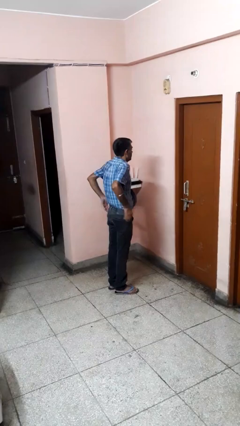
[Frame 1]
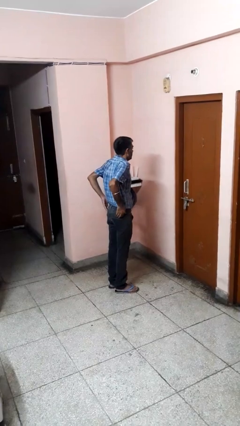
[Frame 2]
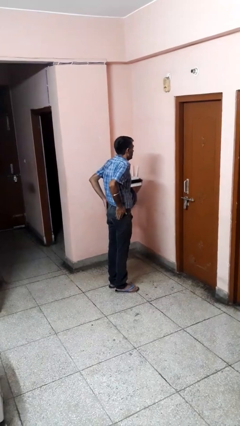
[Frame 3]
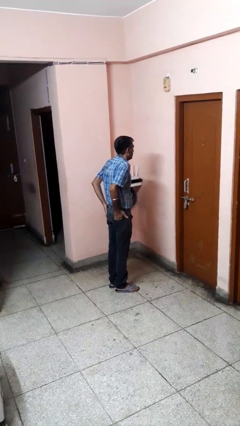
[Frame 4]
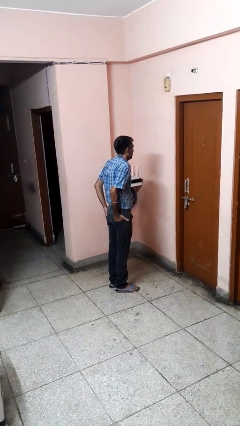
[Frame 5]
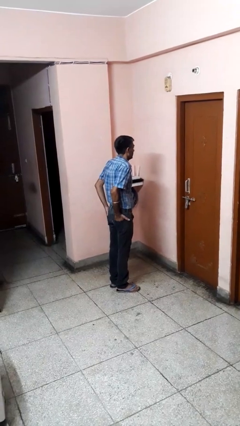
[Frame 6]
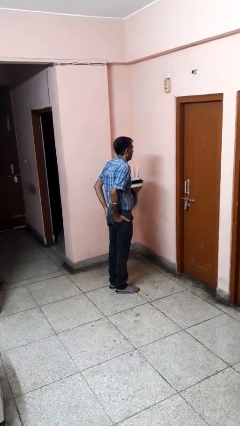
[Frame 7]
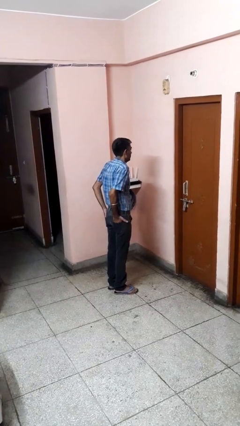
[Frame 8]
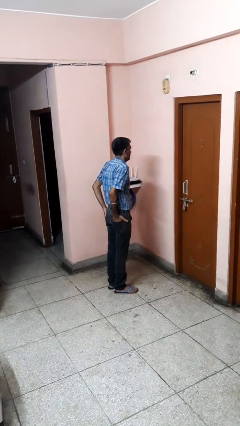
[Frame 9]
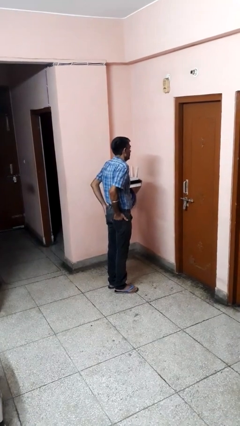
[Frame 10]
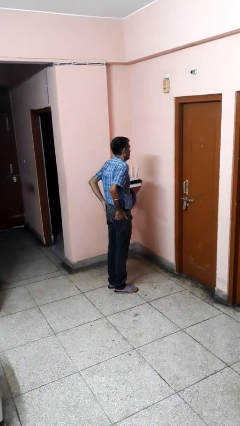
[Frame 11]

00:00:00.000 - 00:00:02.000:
person puts hands in back pockets

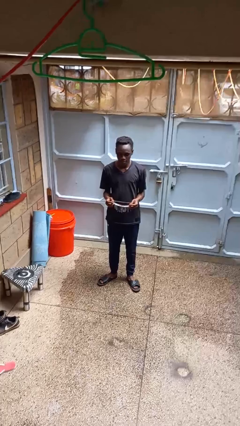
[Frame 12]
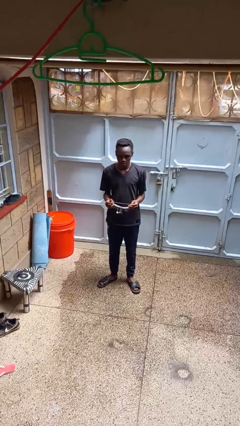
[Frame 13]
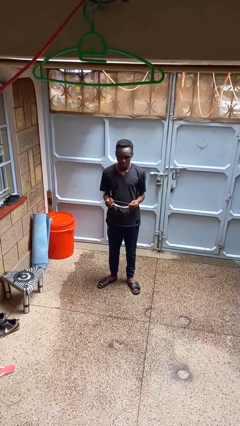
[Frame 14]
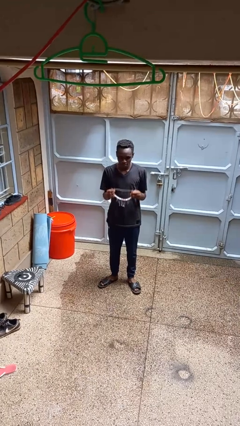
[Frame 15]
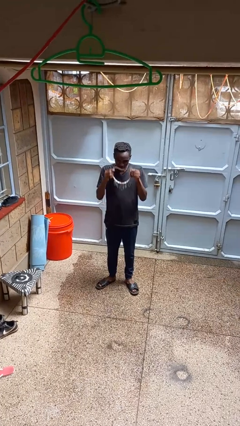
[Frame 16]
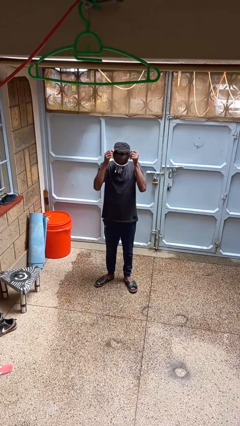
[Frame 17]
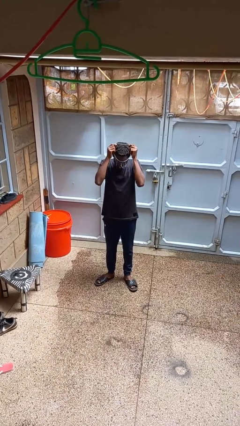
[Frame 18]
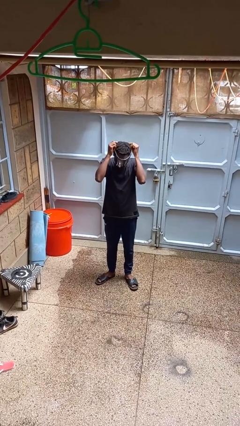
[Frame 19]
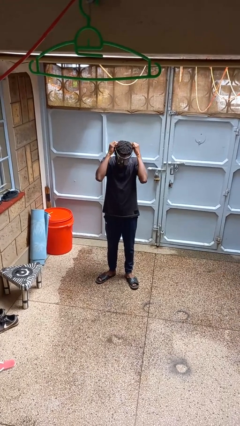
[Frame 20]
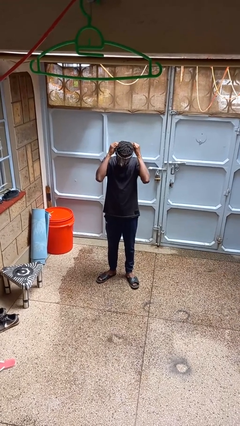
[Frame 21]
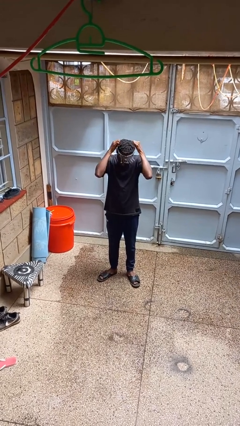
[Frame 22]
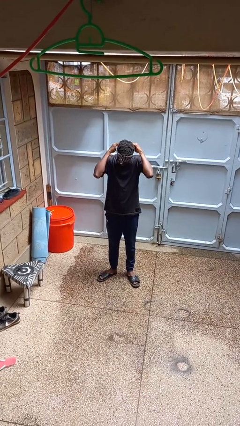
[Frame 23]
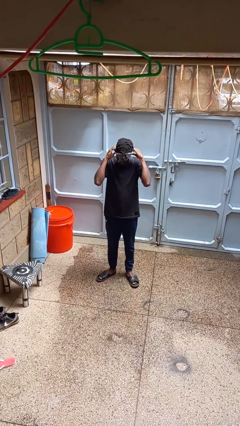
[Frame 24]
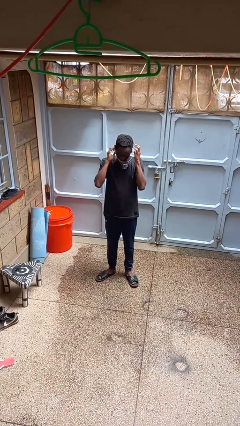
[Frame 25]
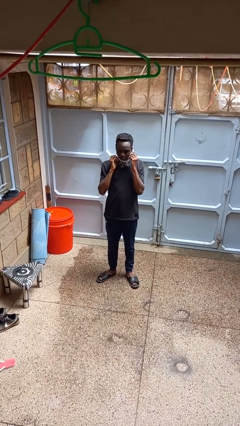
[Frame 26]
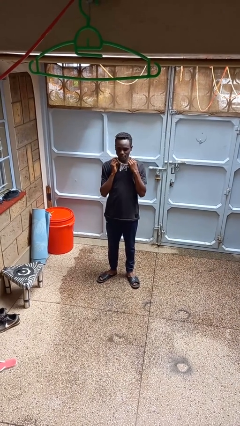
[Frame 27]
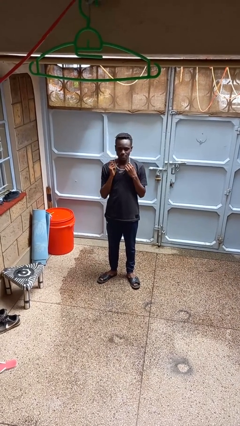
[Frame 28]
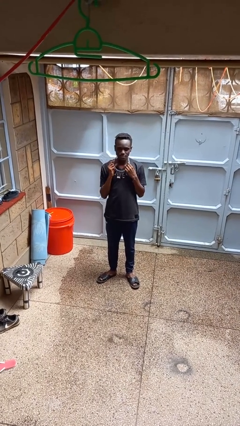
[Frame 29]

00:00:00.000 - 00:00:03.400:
person puts on necklace

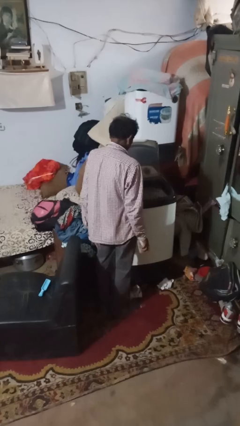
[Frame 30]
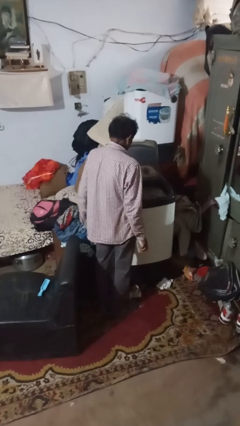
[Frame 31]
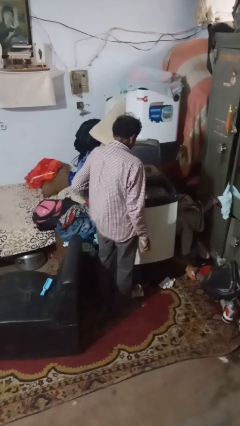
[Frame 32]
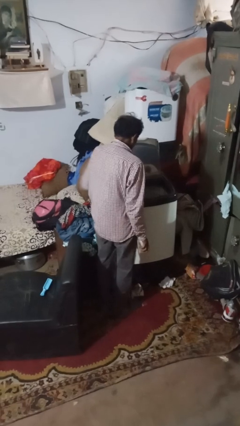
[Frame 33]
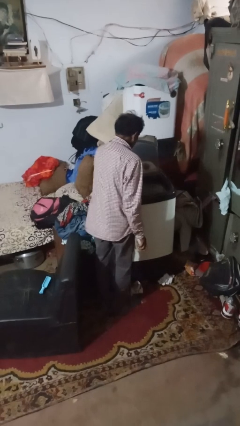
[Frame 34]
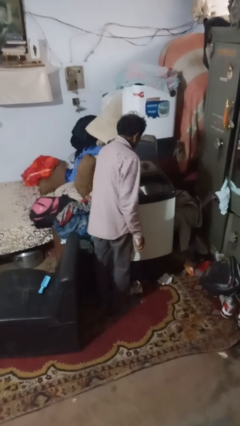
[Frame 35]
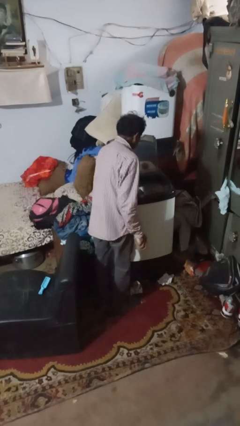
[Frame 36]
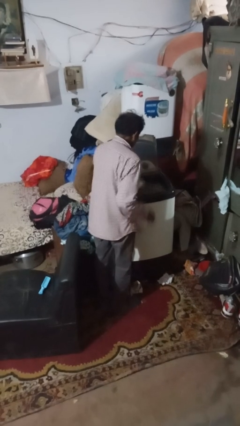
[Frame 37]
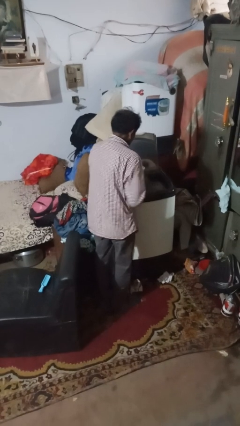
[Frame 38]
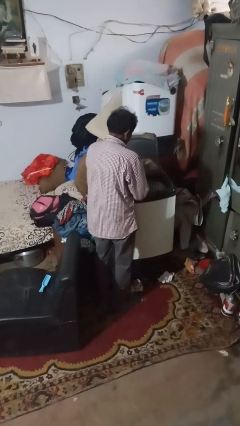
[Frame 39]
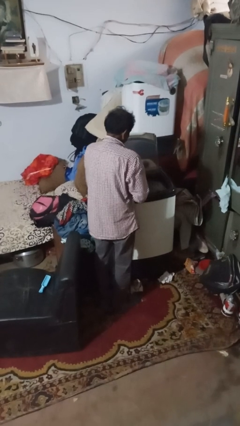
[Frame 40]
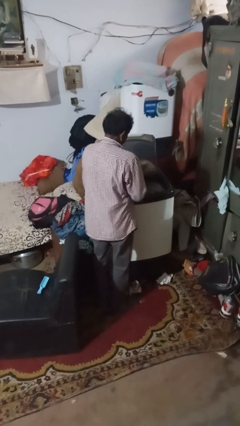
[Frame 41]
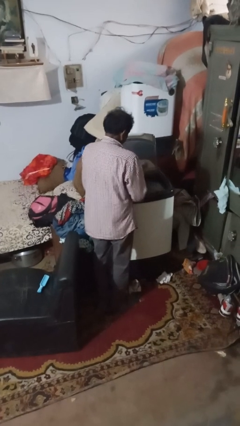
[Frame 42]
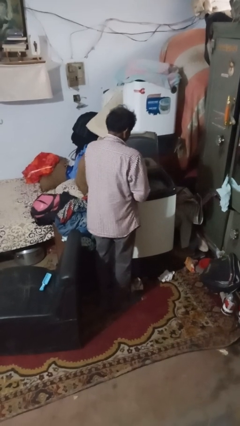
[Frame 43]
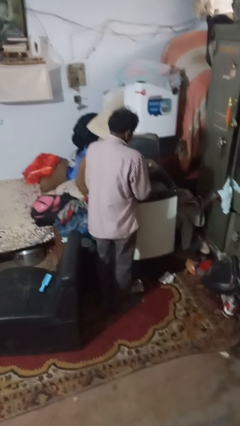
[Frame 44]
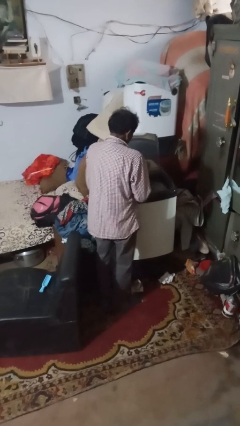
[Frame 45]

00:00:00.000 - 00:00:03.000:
person cleans dryer lint trap

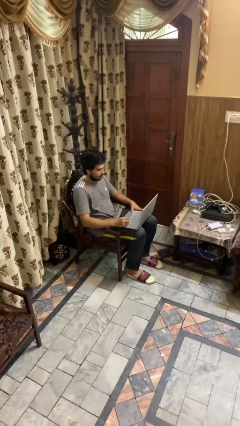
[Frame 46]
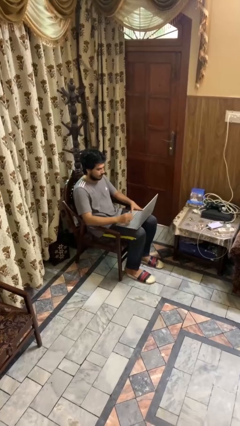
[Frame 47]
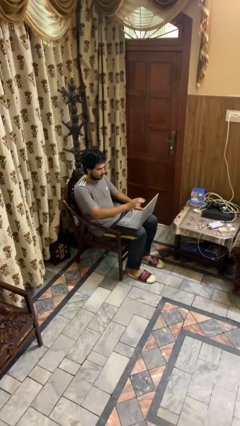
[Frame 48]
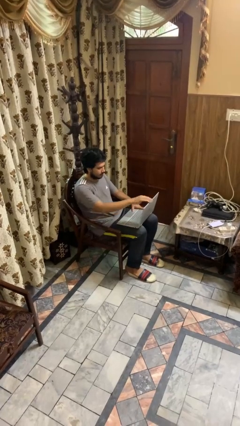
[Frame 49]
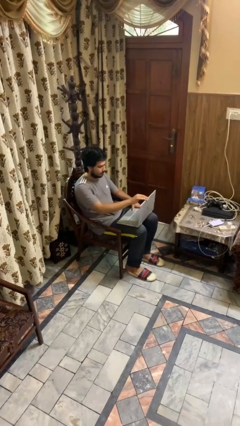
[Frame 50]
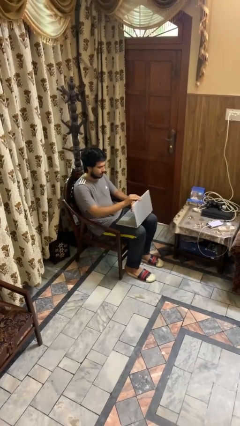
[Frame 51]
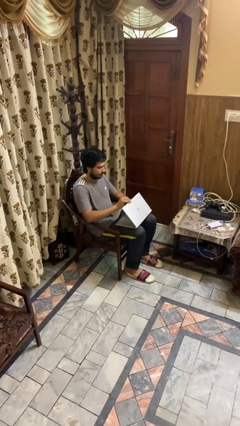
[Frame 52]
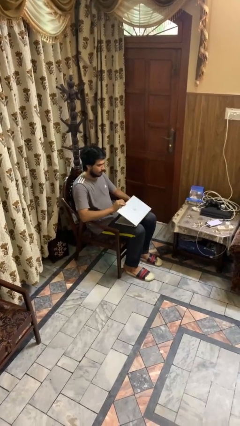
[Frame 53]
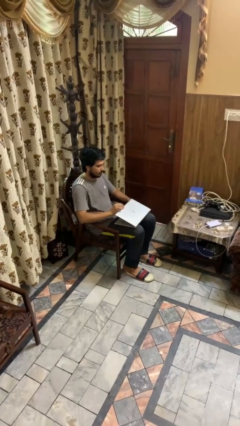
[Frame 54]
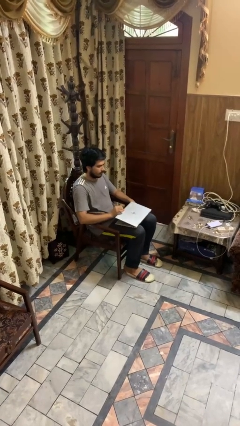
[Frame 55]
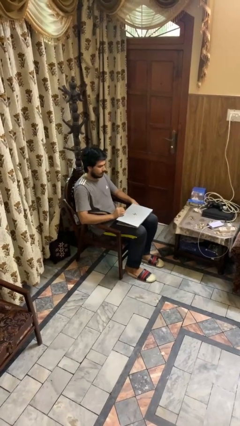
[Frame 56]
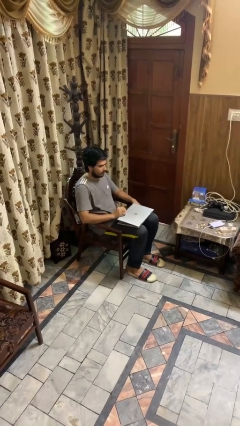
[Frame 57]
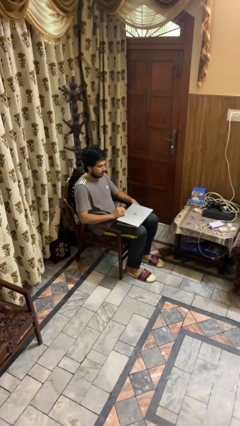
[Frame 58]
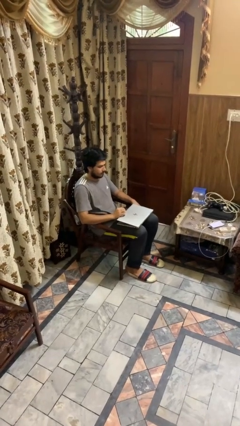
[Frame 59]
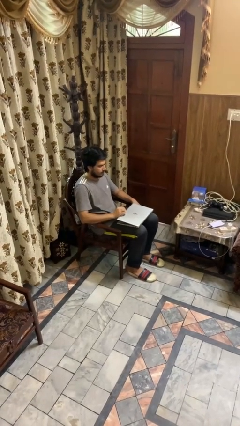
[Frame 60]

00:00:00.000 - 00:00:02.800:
person closes laptop

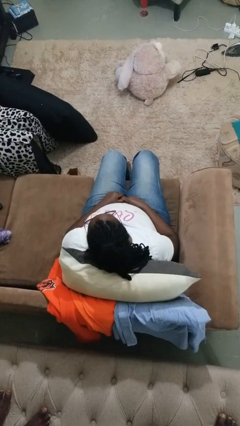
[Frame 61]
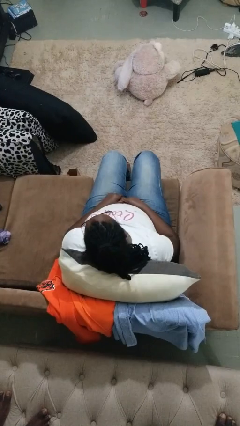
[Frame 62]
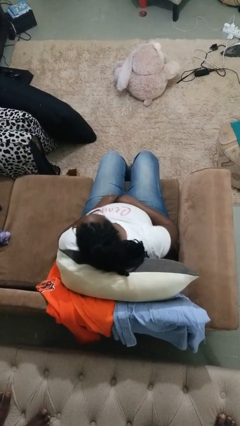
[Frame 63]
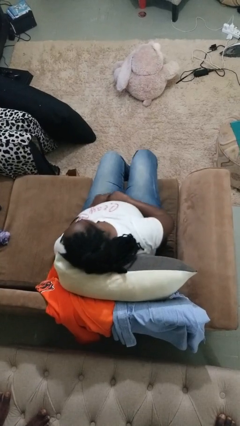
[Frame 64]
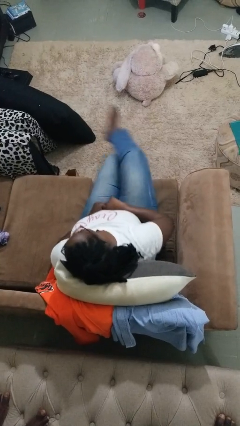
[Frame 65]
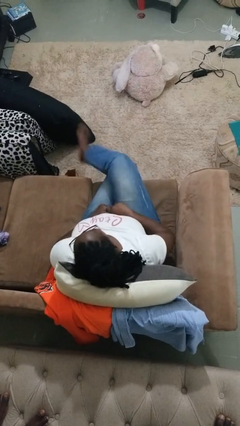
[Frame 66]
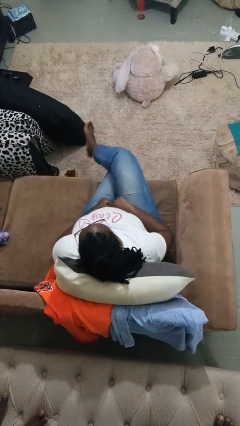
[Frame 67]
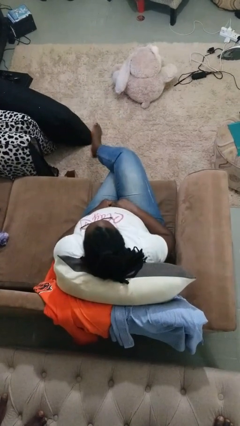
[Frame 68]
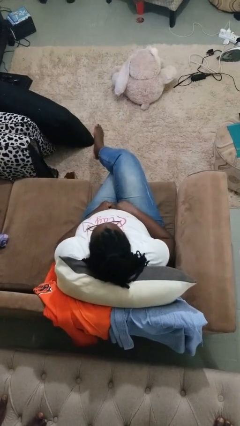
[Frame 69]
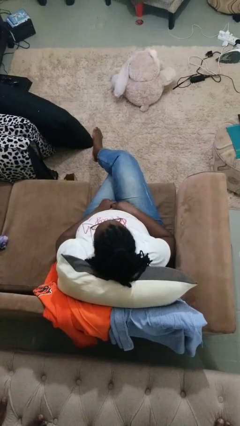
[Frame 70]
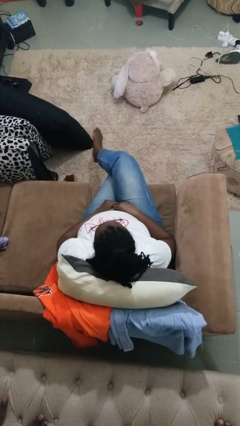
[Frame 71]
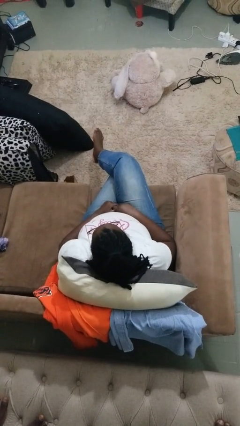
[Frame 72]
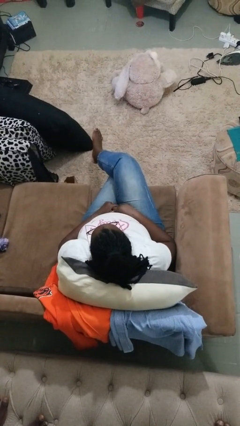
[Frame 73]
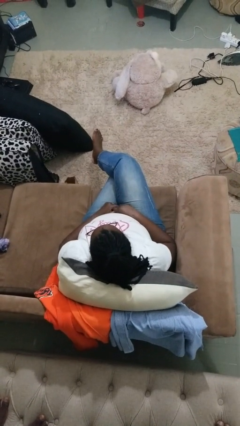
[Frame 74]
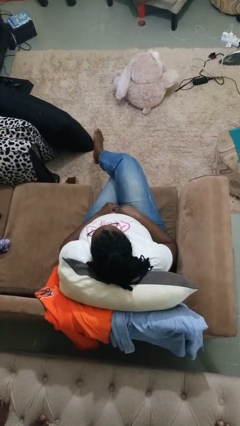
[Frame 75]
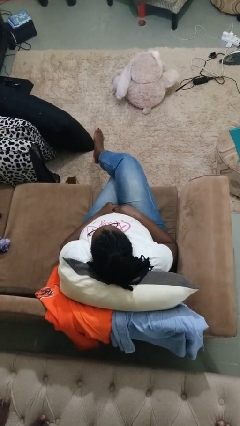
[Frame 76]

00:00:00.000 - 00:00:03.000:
person crosses legs

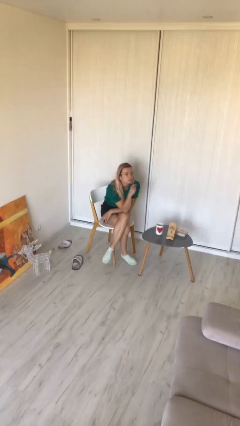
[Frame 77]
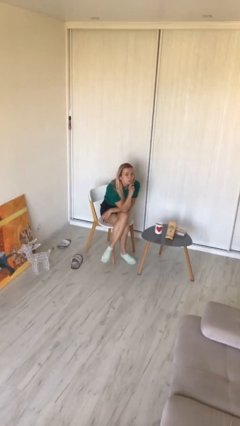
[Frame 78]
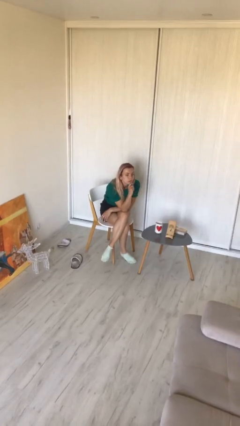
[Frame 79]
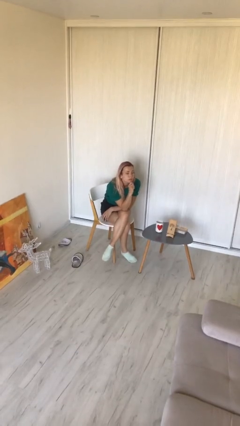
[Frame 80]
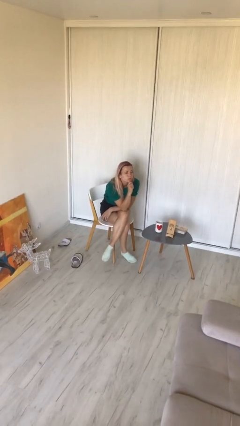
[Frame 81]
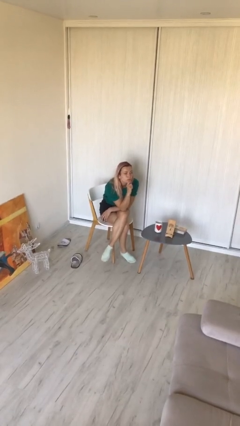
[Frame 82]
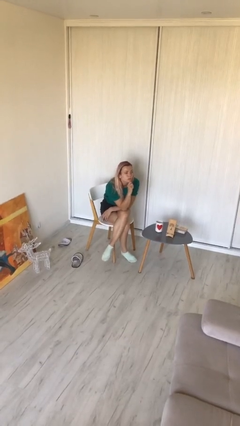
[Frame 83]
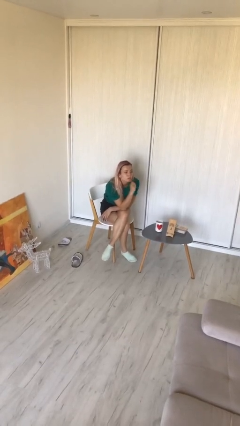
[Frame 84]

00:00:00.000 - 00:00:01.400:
person strokes chin

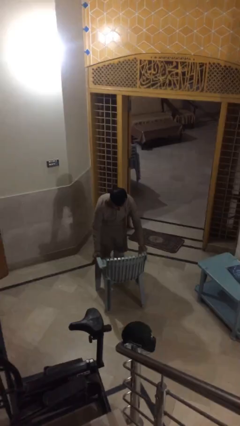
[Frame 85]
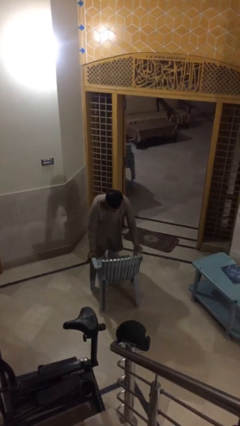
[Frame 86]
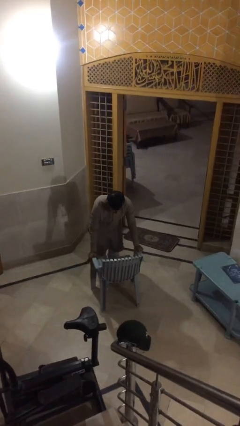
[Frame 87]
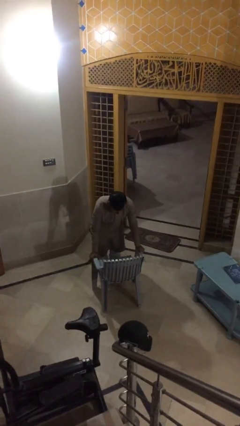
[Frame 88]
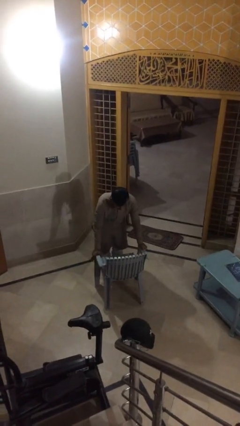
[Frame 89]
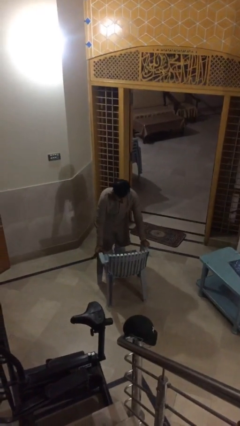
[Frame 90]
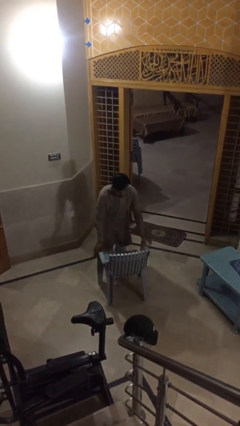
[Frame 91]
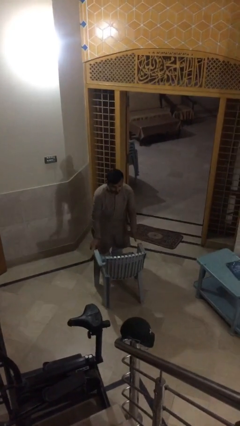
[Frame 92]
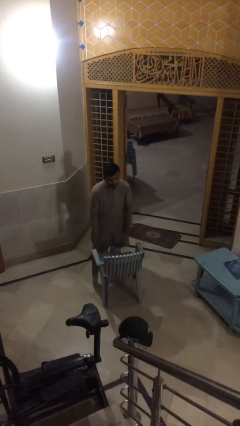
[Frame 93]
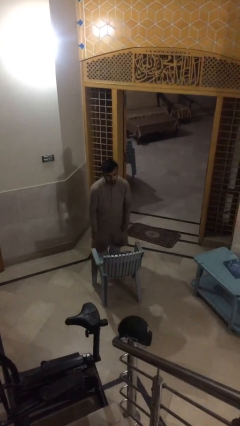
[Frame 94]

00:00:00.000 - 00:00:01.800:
person puts down object on floor
